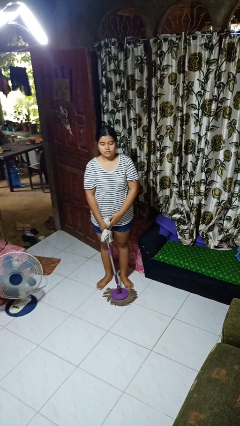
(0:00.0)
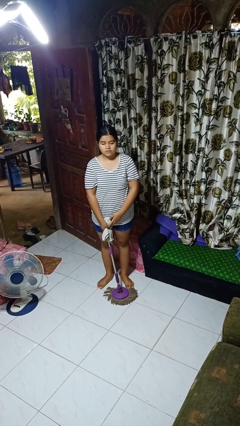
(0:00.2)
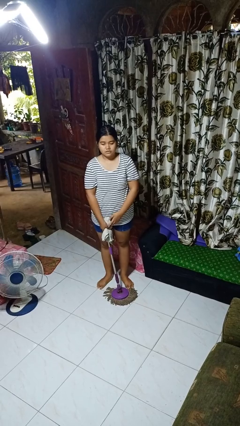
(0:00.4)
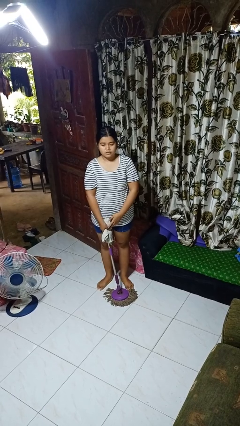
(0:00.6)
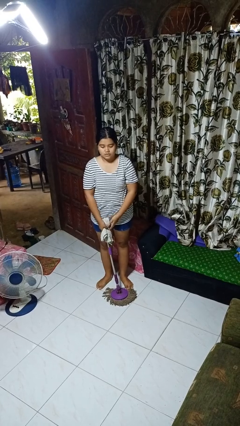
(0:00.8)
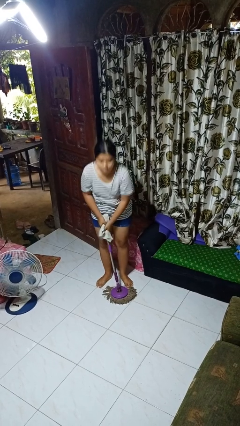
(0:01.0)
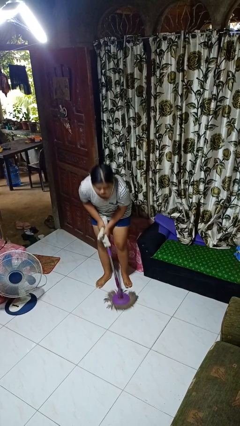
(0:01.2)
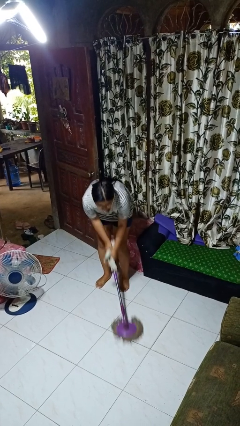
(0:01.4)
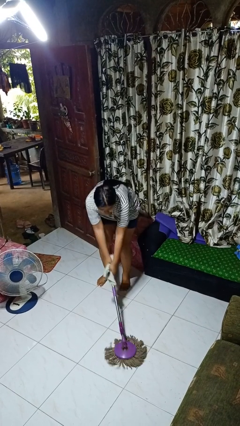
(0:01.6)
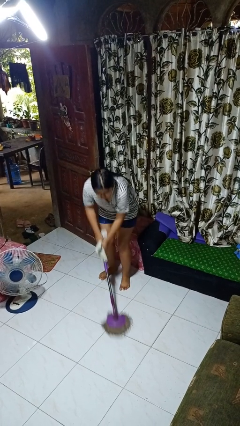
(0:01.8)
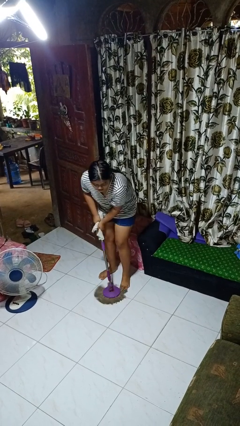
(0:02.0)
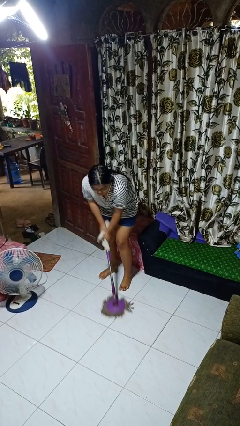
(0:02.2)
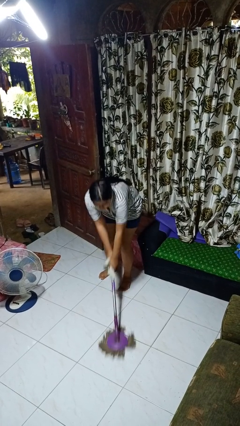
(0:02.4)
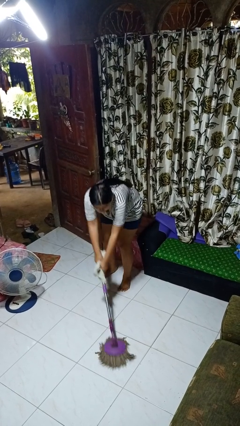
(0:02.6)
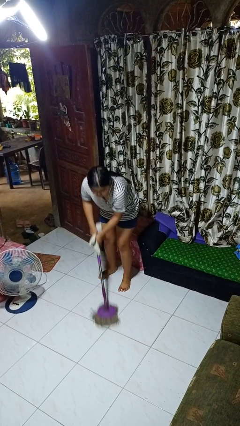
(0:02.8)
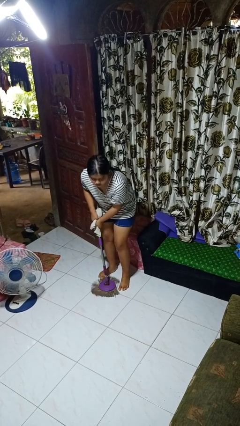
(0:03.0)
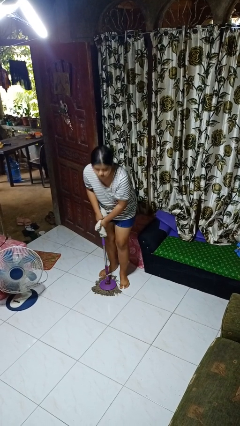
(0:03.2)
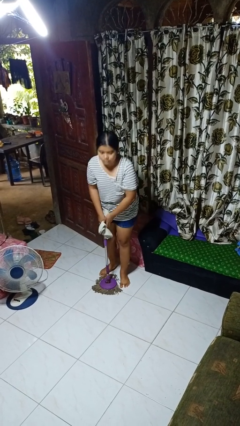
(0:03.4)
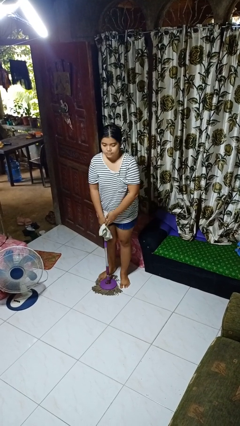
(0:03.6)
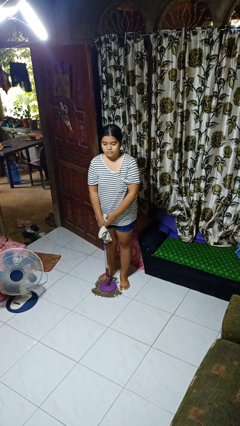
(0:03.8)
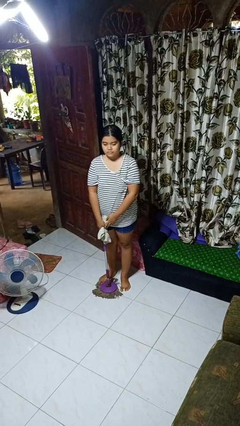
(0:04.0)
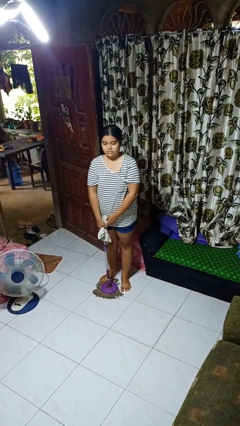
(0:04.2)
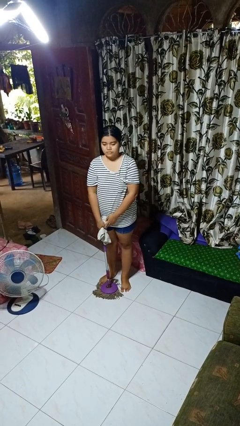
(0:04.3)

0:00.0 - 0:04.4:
person mops

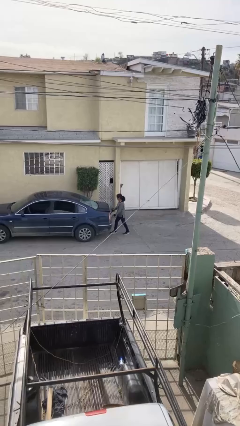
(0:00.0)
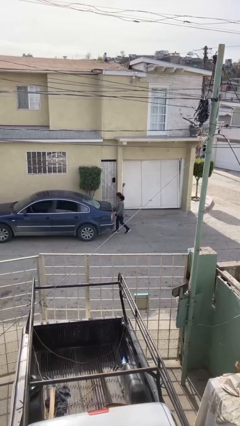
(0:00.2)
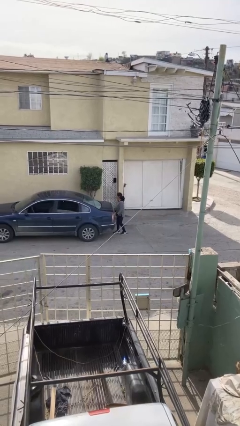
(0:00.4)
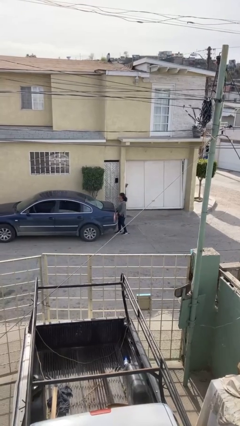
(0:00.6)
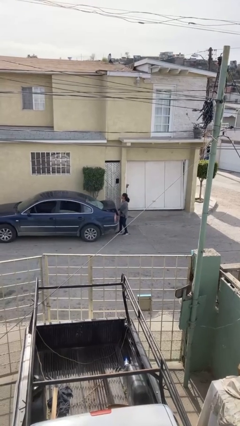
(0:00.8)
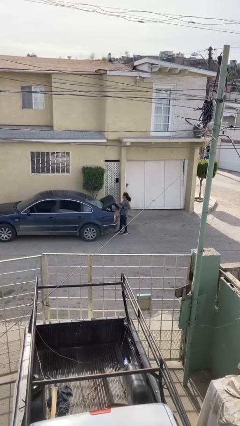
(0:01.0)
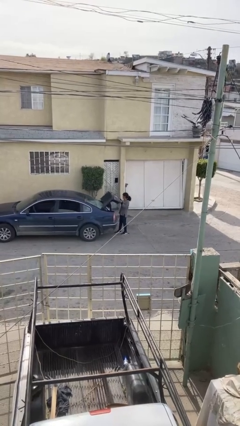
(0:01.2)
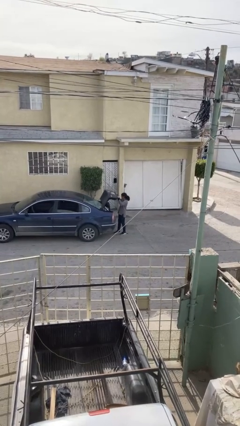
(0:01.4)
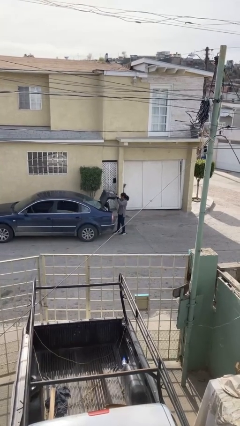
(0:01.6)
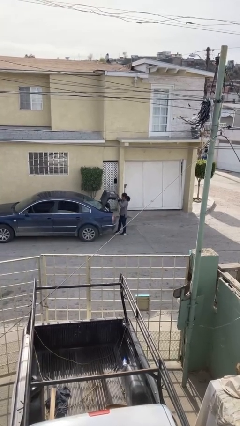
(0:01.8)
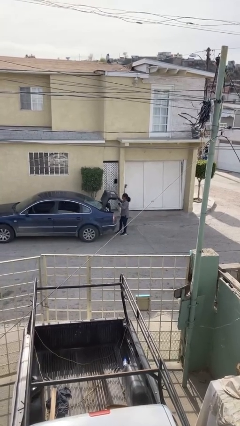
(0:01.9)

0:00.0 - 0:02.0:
person opens car trunk

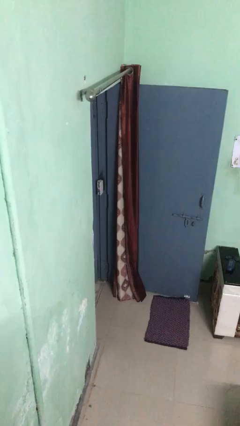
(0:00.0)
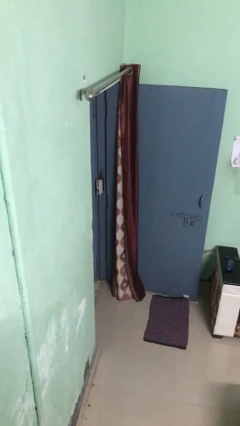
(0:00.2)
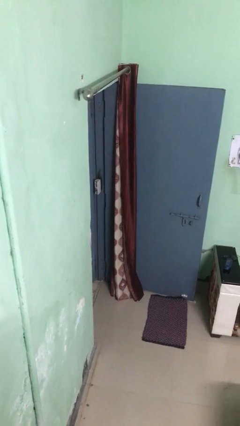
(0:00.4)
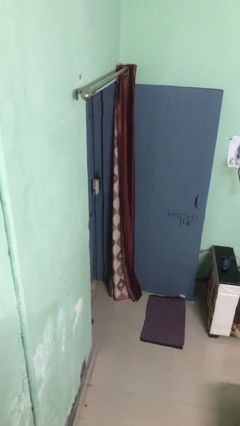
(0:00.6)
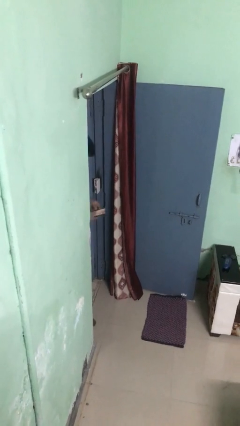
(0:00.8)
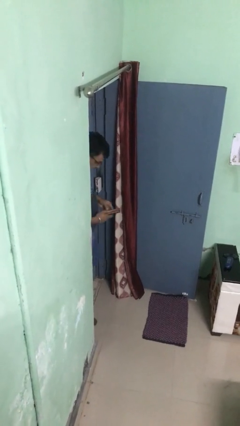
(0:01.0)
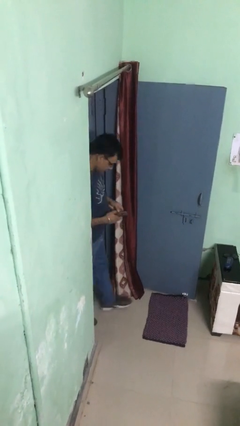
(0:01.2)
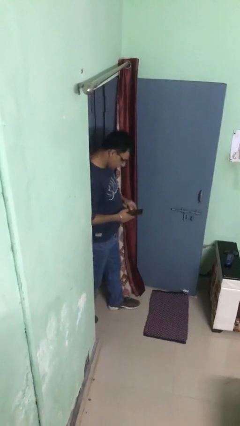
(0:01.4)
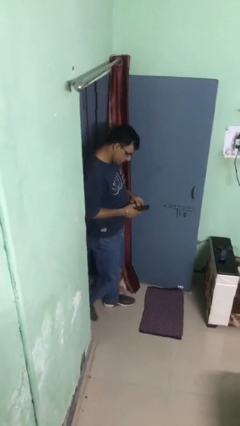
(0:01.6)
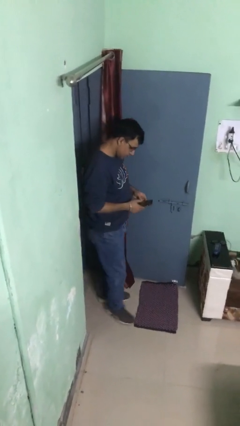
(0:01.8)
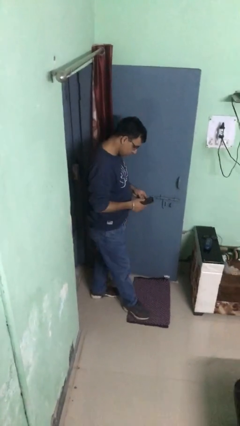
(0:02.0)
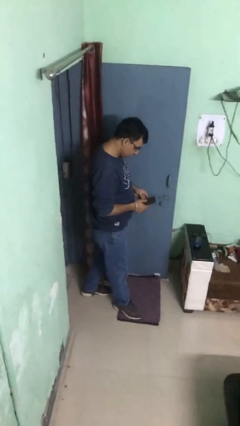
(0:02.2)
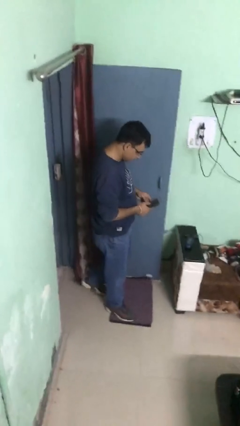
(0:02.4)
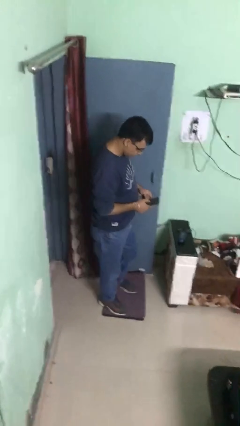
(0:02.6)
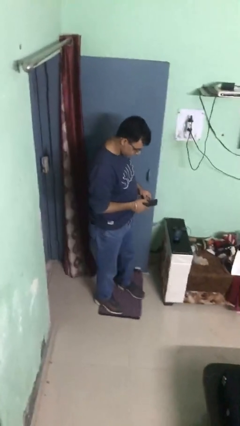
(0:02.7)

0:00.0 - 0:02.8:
person enters scene through structure

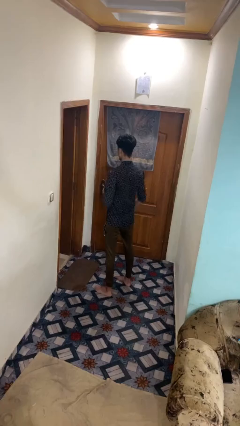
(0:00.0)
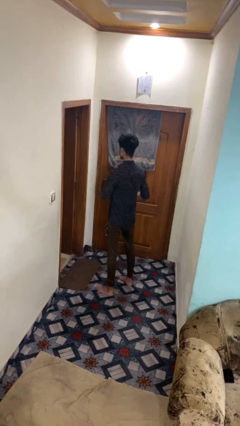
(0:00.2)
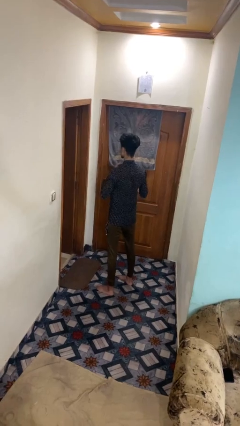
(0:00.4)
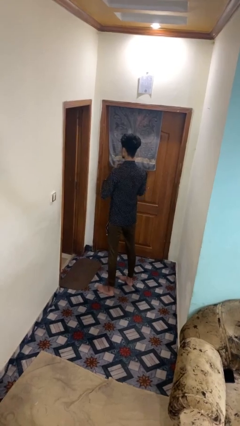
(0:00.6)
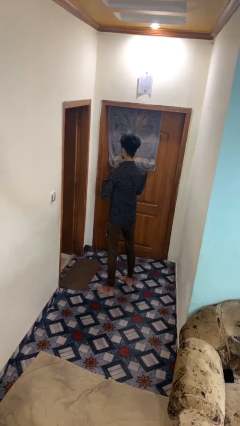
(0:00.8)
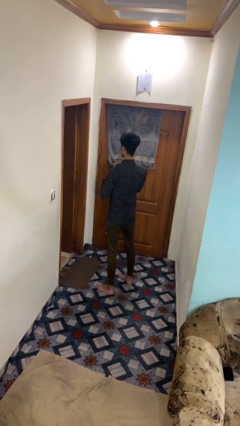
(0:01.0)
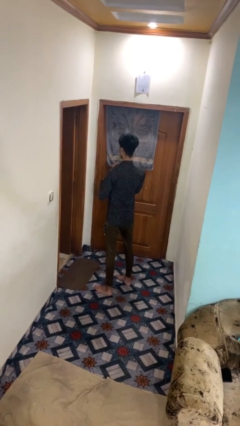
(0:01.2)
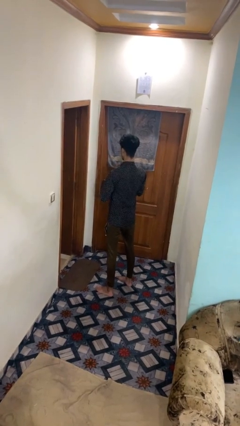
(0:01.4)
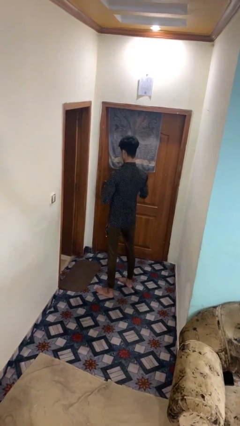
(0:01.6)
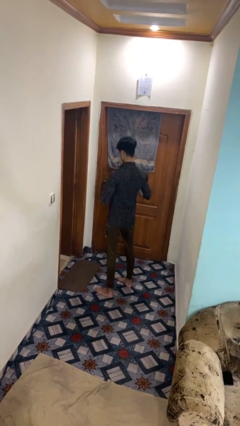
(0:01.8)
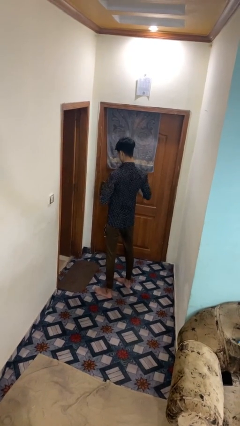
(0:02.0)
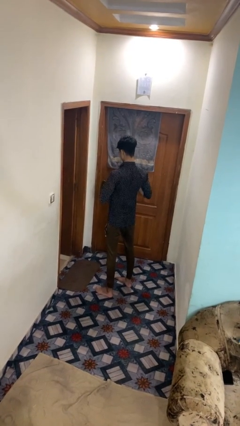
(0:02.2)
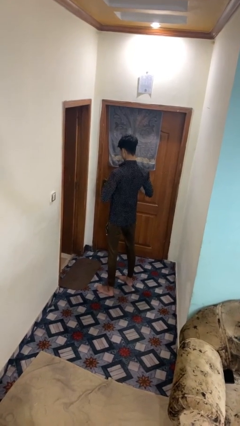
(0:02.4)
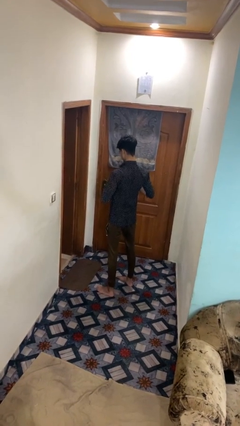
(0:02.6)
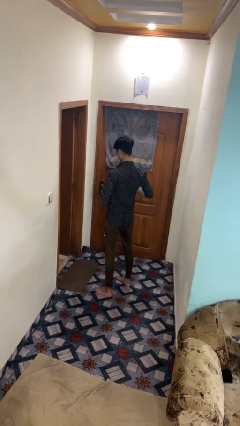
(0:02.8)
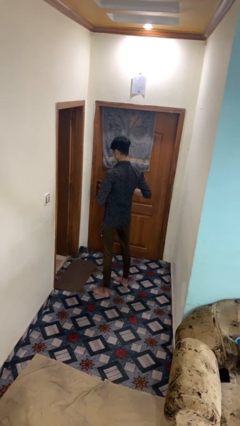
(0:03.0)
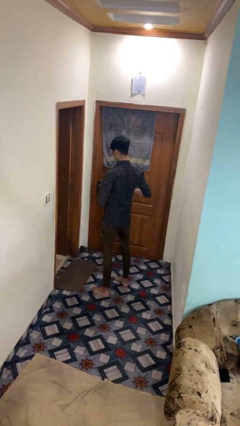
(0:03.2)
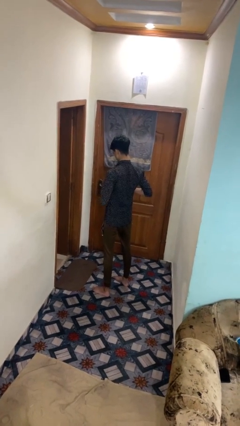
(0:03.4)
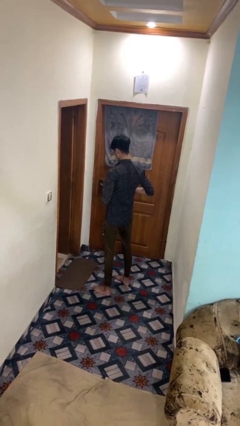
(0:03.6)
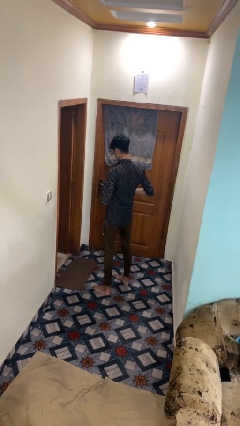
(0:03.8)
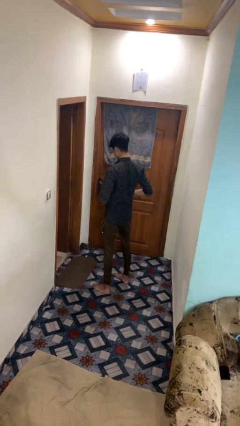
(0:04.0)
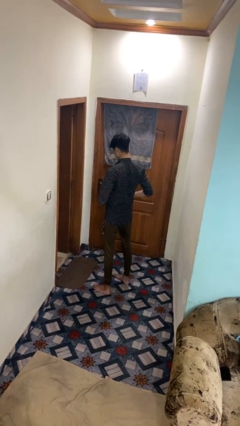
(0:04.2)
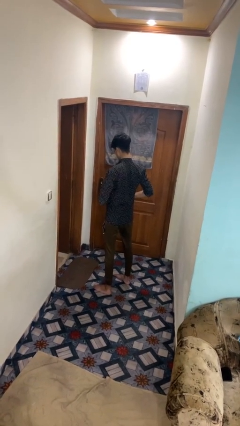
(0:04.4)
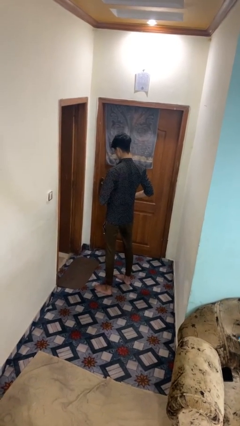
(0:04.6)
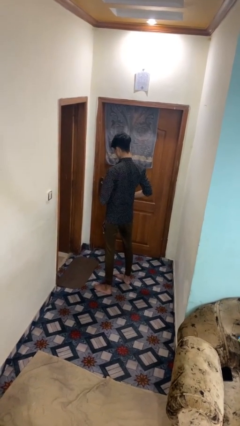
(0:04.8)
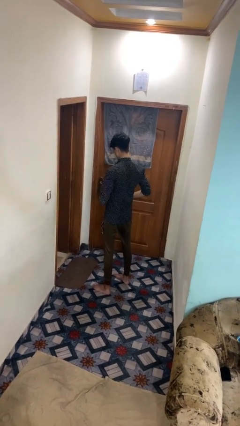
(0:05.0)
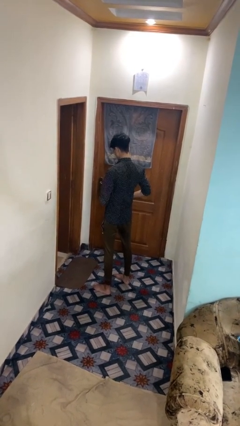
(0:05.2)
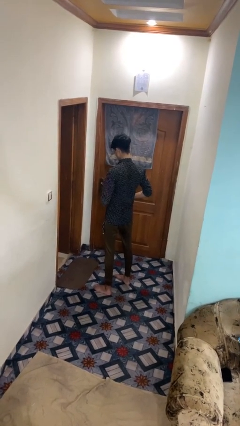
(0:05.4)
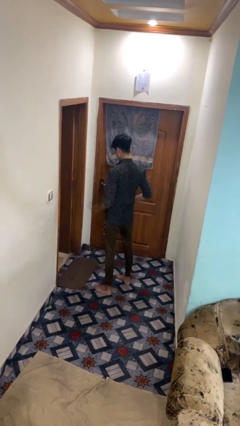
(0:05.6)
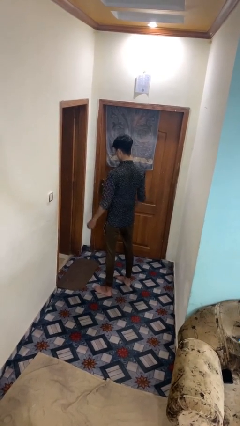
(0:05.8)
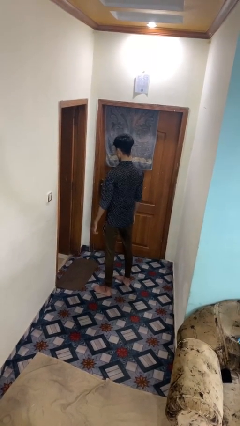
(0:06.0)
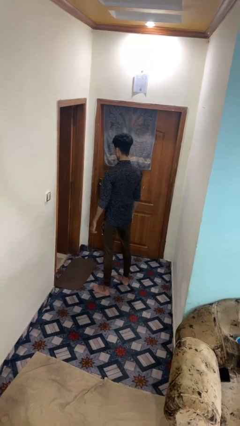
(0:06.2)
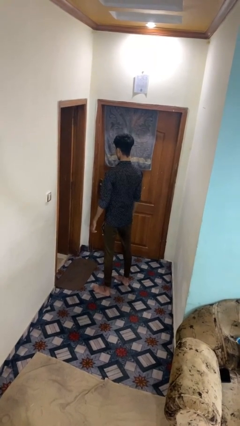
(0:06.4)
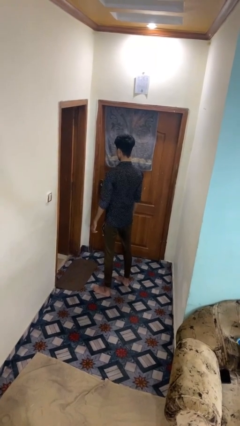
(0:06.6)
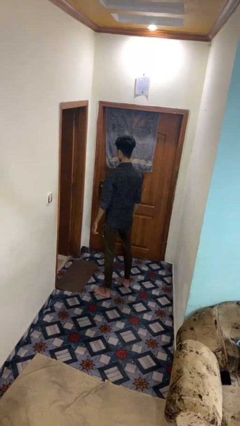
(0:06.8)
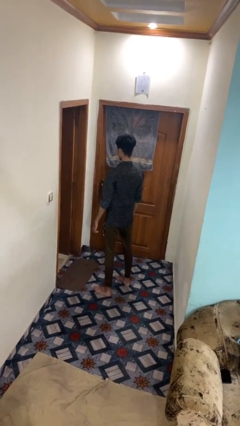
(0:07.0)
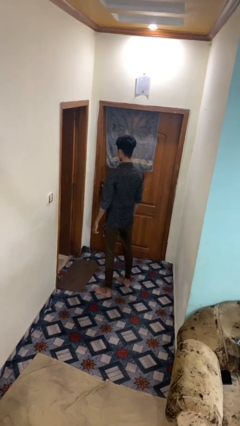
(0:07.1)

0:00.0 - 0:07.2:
person unbuttons shirt

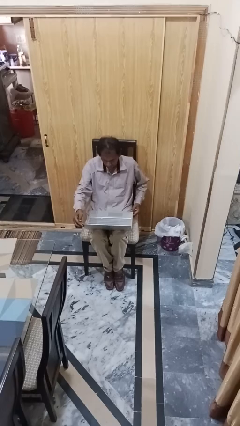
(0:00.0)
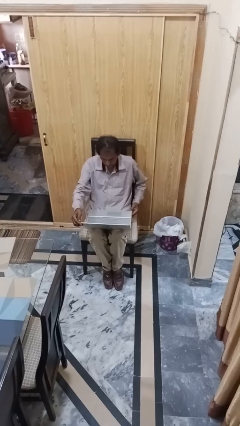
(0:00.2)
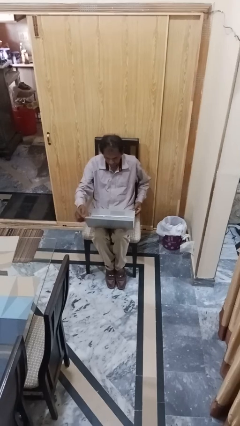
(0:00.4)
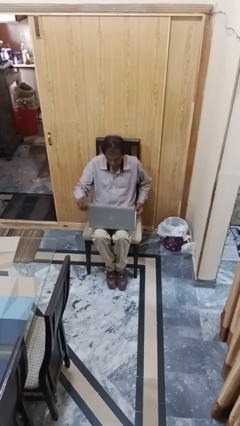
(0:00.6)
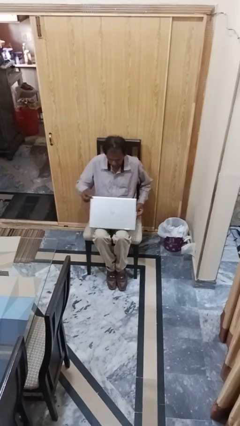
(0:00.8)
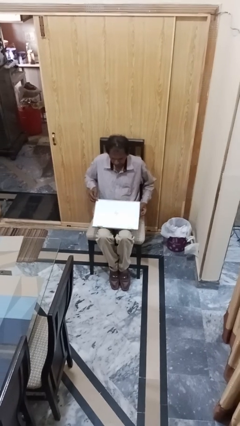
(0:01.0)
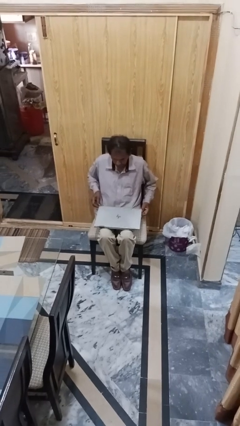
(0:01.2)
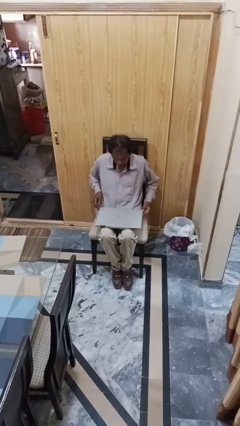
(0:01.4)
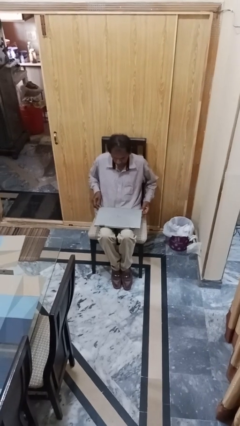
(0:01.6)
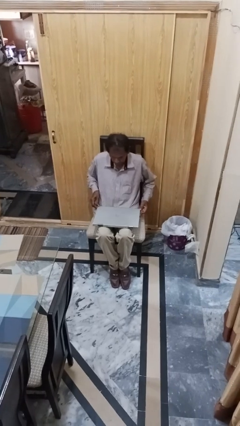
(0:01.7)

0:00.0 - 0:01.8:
person closes laptop
